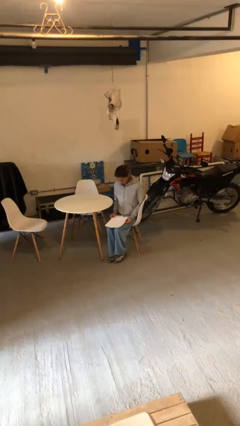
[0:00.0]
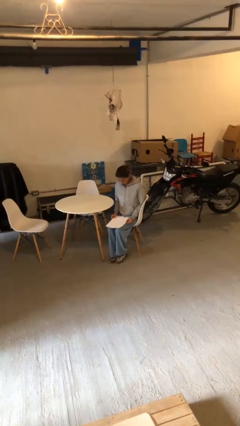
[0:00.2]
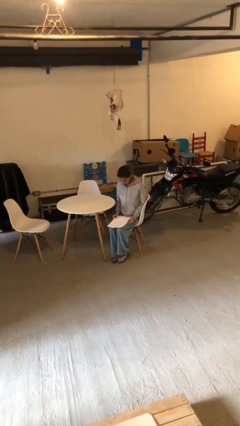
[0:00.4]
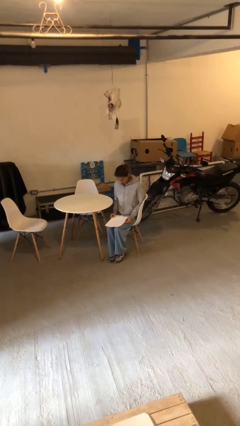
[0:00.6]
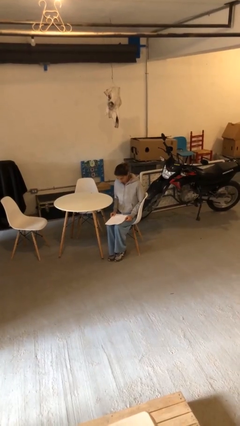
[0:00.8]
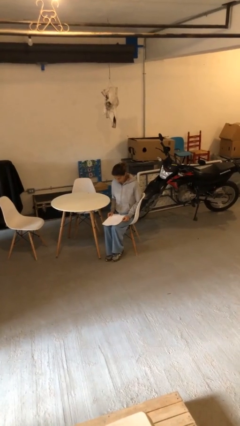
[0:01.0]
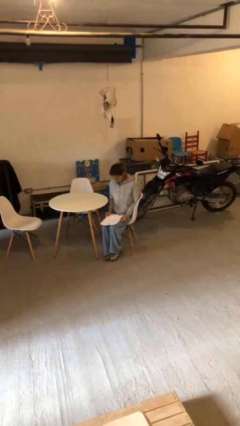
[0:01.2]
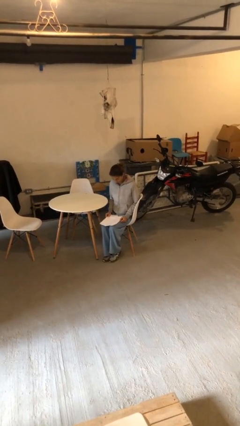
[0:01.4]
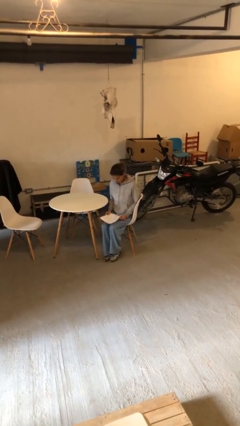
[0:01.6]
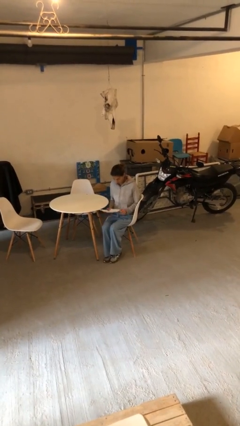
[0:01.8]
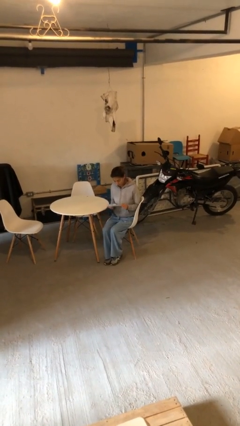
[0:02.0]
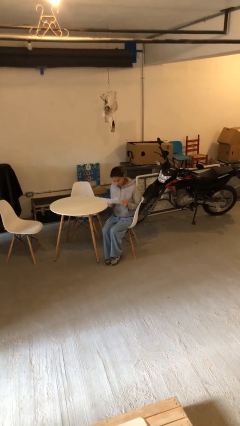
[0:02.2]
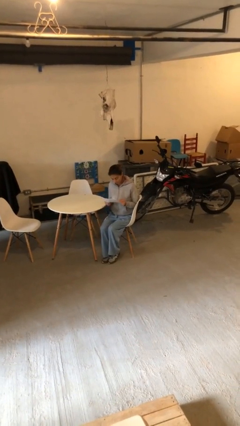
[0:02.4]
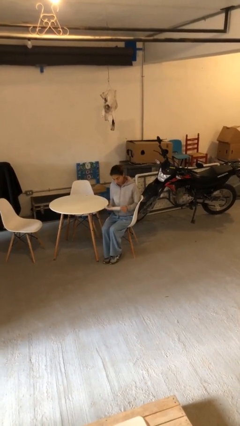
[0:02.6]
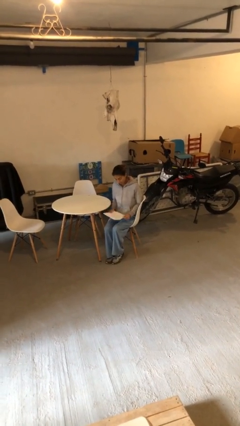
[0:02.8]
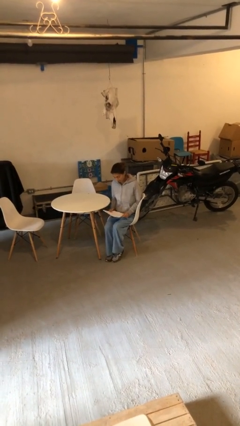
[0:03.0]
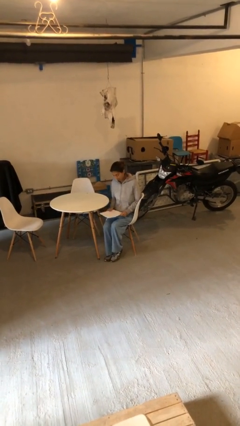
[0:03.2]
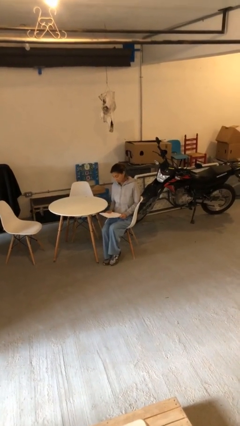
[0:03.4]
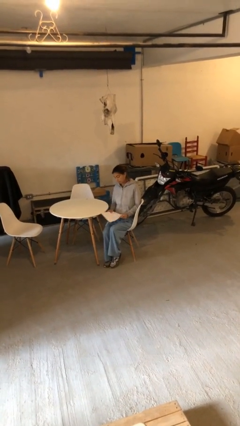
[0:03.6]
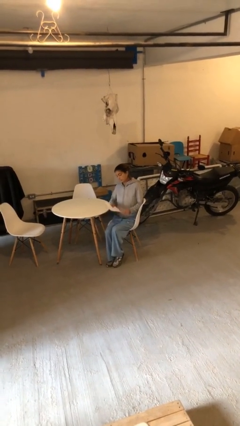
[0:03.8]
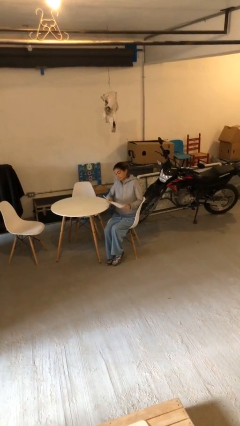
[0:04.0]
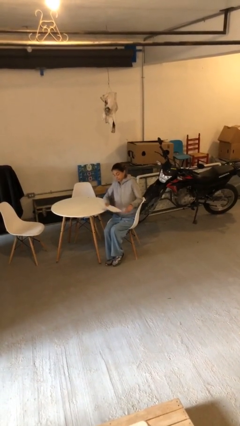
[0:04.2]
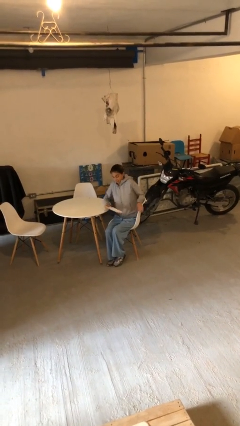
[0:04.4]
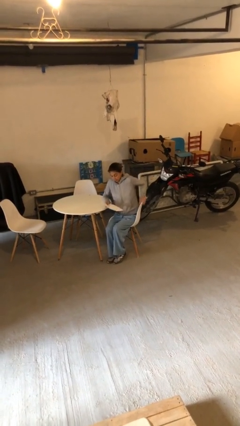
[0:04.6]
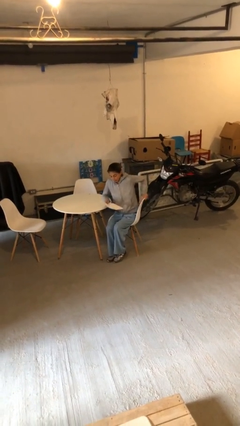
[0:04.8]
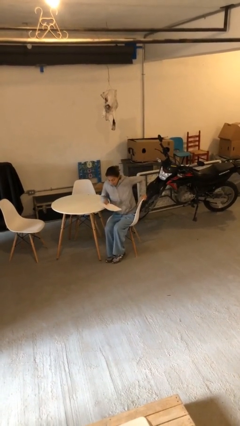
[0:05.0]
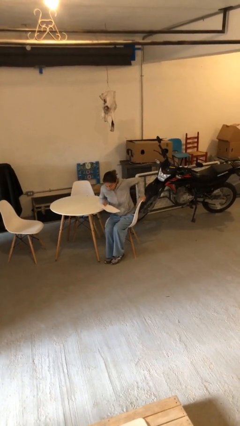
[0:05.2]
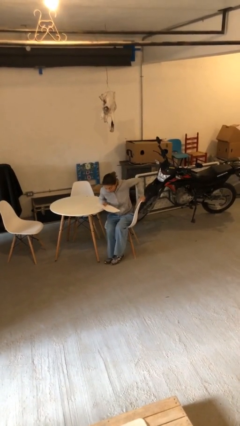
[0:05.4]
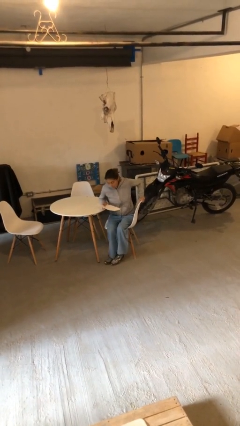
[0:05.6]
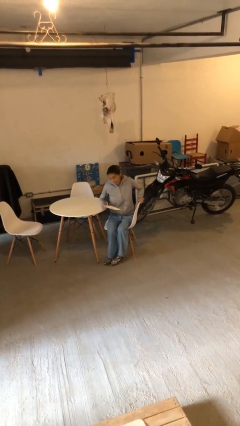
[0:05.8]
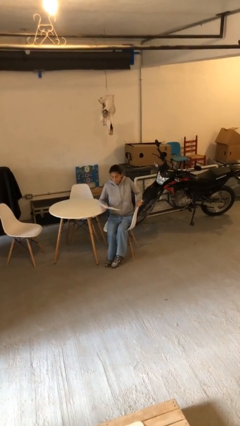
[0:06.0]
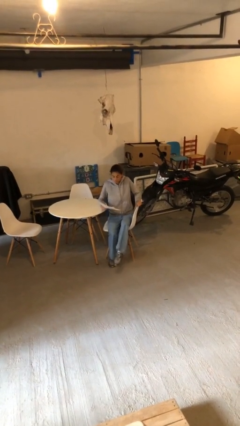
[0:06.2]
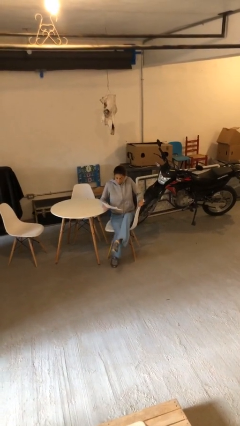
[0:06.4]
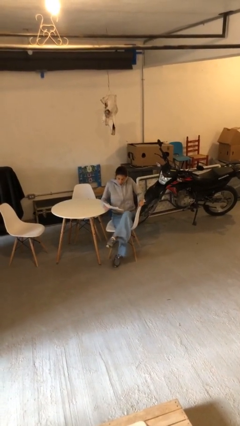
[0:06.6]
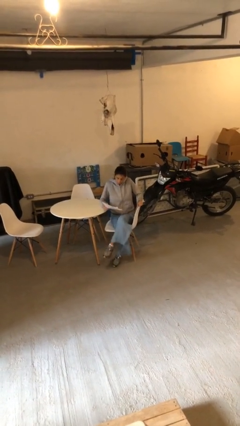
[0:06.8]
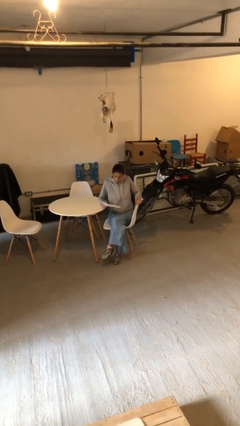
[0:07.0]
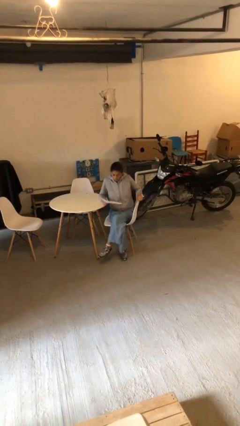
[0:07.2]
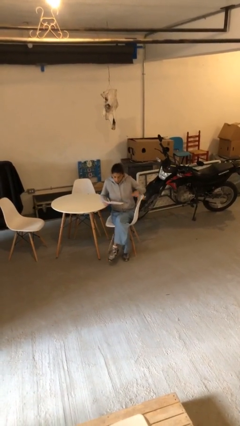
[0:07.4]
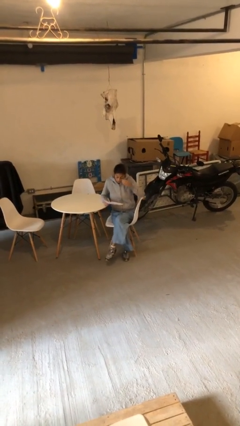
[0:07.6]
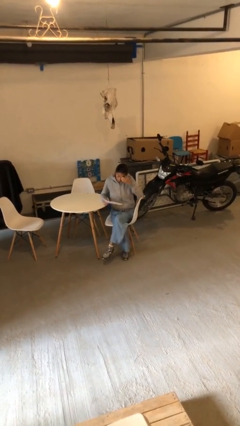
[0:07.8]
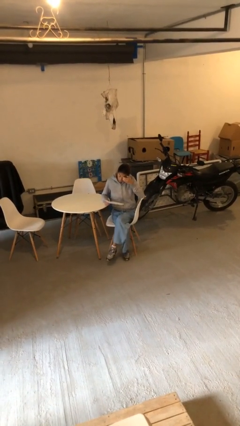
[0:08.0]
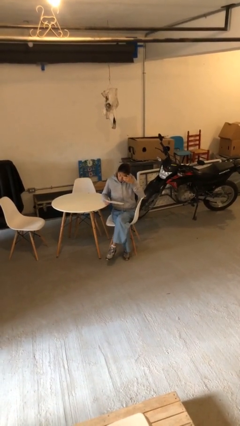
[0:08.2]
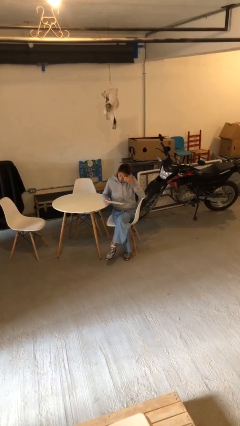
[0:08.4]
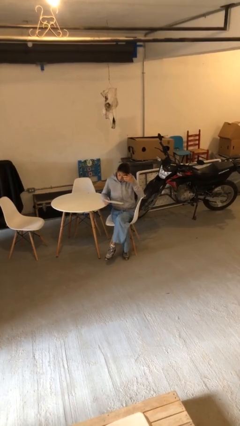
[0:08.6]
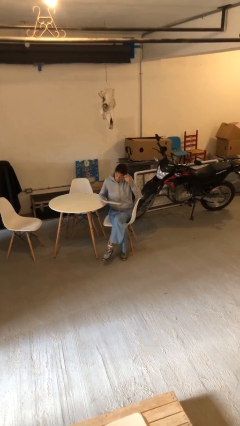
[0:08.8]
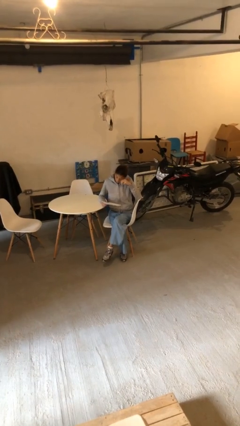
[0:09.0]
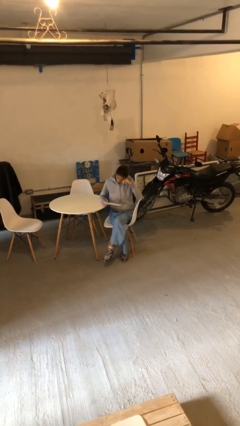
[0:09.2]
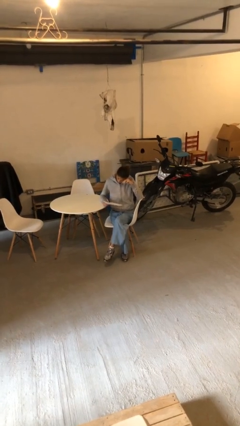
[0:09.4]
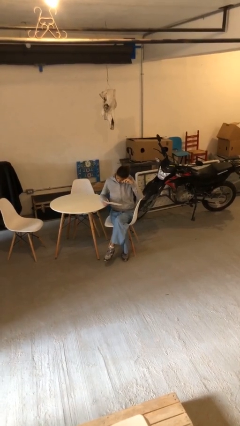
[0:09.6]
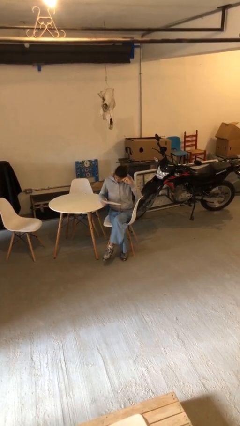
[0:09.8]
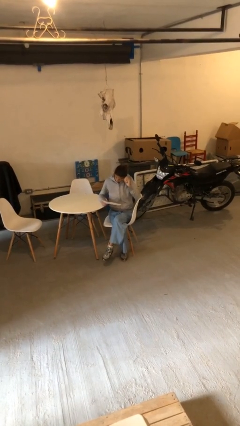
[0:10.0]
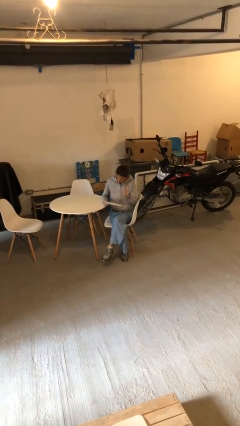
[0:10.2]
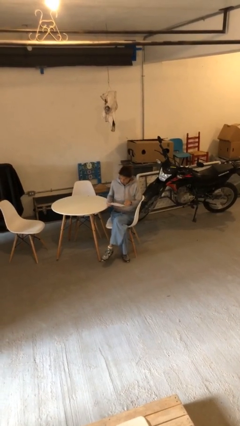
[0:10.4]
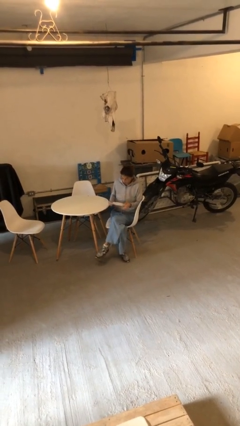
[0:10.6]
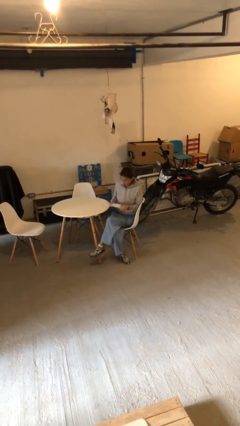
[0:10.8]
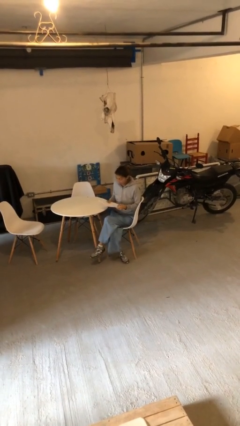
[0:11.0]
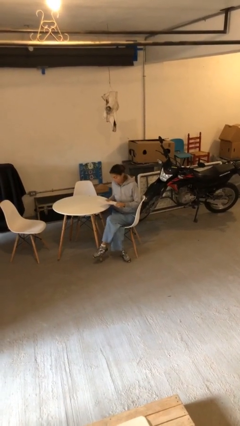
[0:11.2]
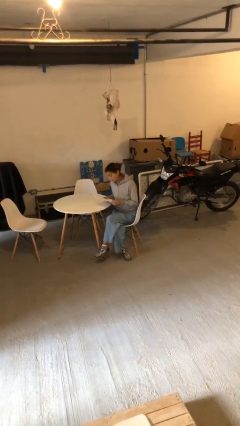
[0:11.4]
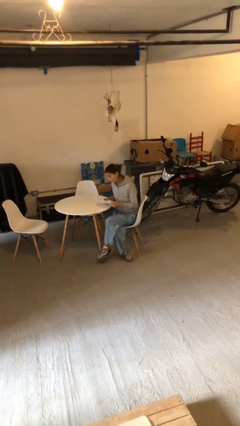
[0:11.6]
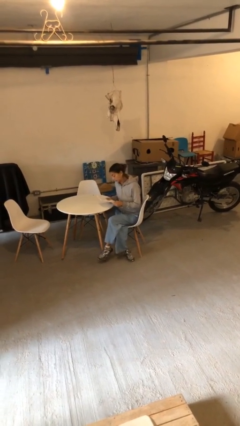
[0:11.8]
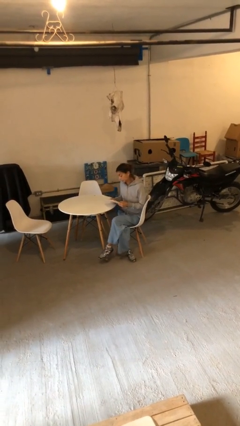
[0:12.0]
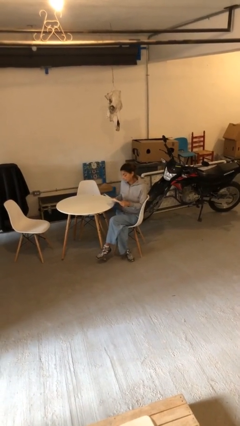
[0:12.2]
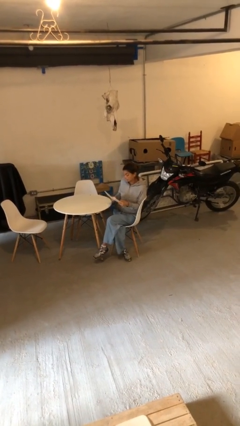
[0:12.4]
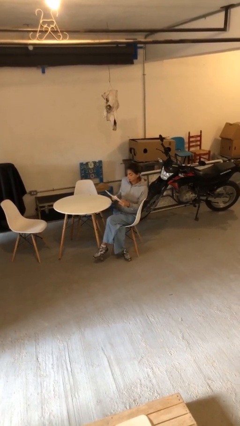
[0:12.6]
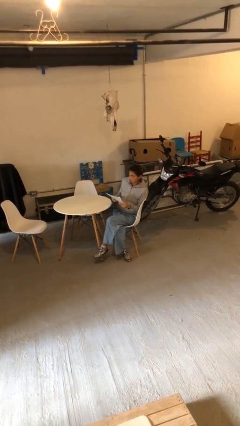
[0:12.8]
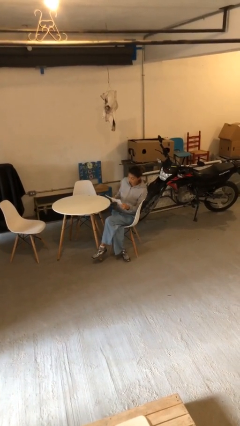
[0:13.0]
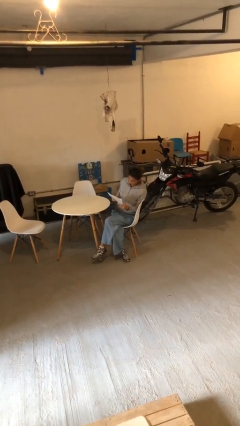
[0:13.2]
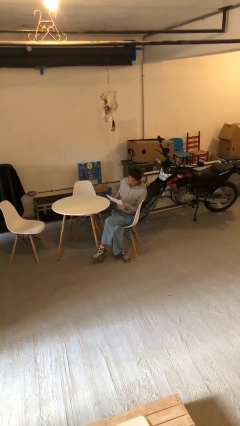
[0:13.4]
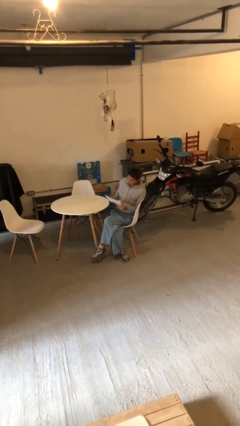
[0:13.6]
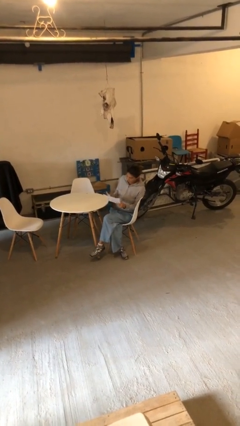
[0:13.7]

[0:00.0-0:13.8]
person reads document

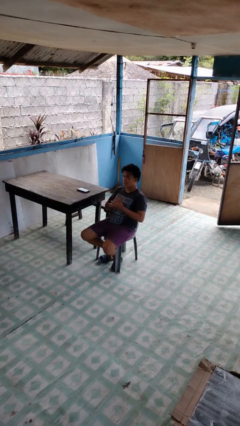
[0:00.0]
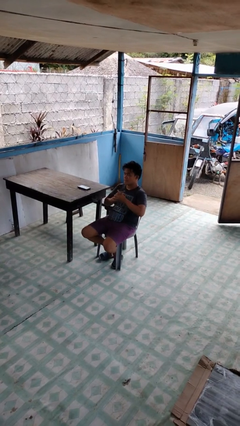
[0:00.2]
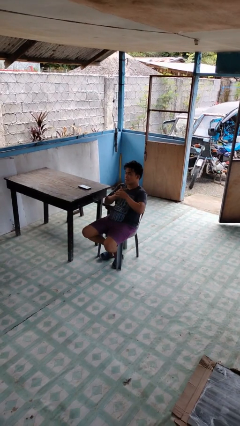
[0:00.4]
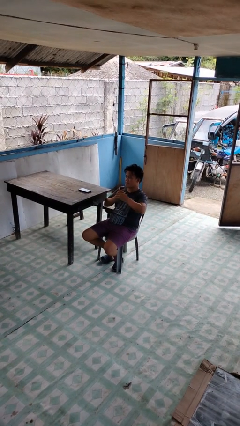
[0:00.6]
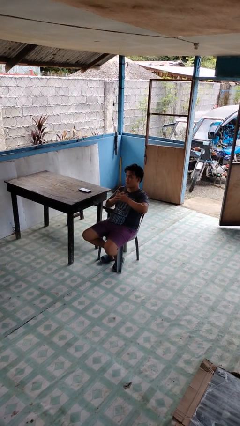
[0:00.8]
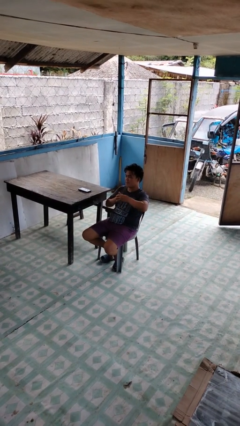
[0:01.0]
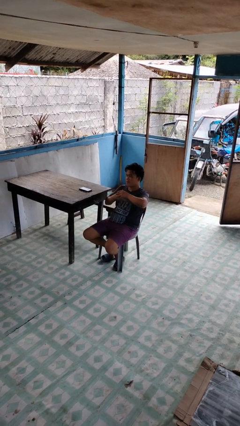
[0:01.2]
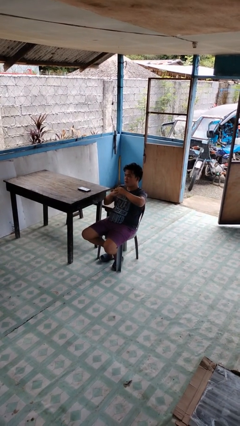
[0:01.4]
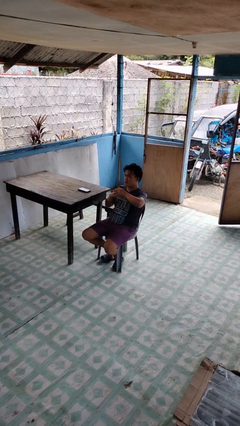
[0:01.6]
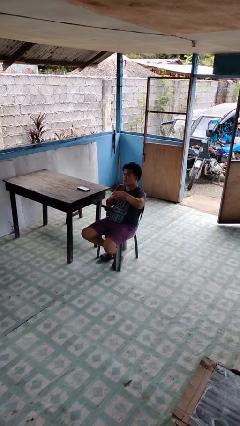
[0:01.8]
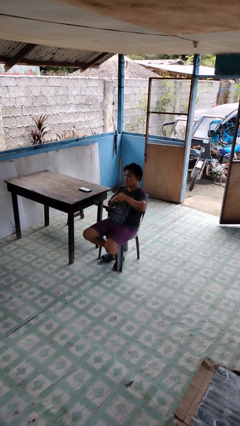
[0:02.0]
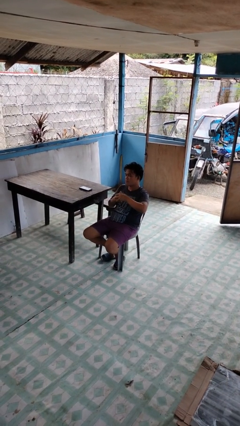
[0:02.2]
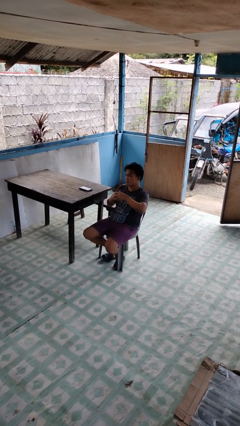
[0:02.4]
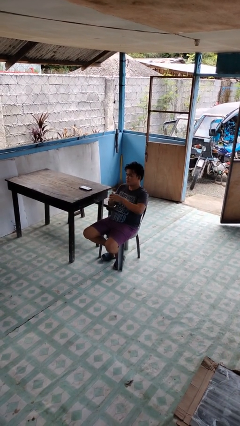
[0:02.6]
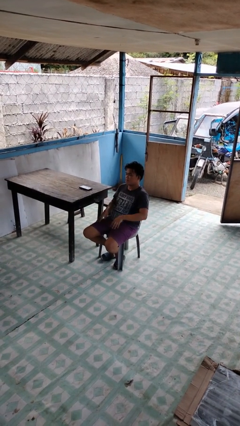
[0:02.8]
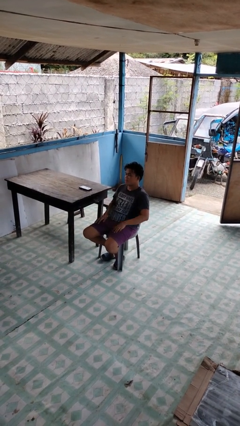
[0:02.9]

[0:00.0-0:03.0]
person cracks knuckles

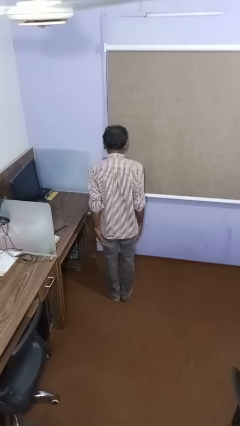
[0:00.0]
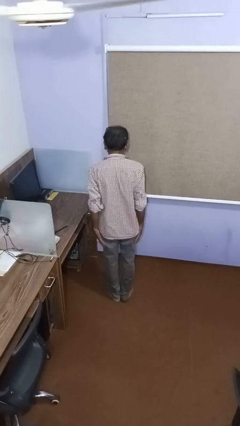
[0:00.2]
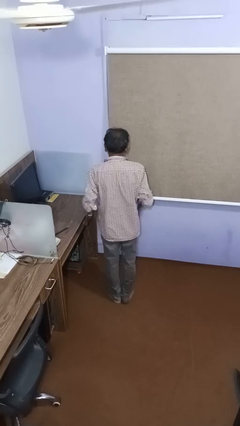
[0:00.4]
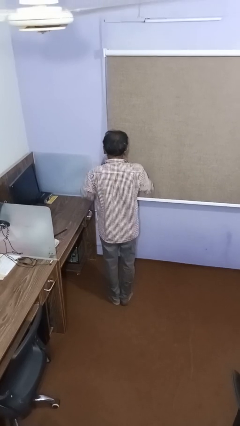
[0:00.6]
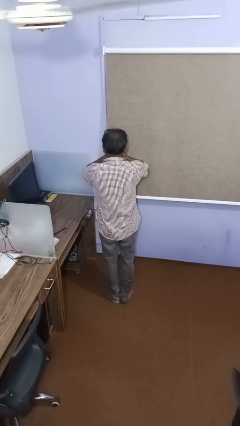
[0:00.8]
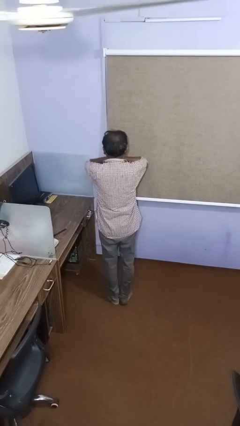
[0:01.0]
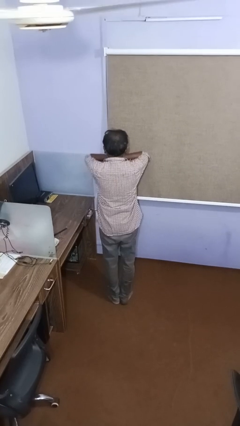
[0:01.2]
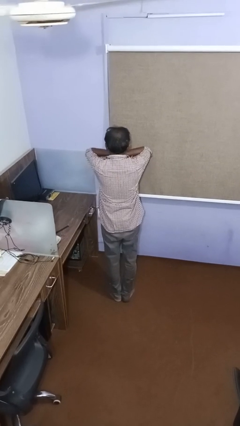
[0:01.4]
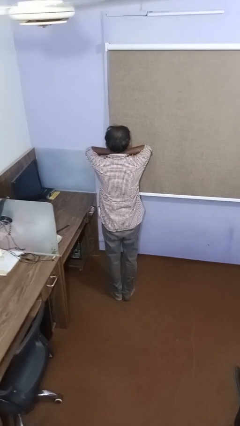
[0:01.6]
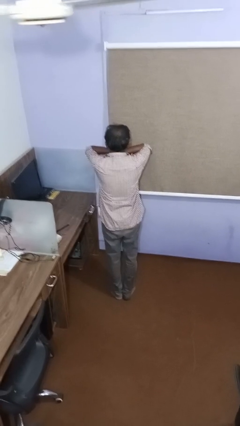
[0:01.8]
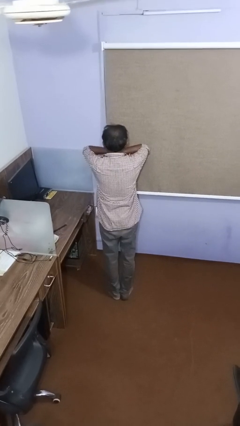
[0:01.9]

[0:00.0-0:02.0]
person covers face with hands
